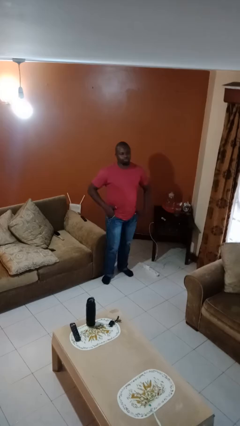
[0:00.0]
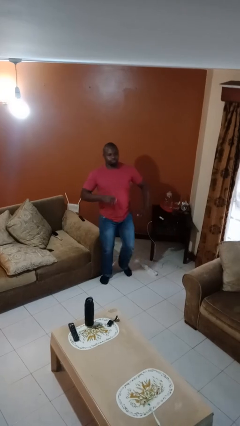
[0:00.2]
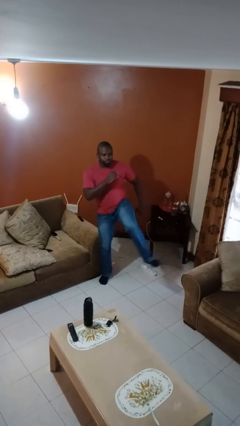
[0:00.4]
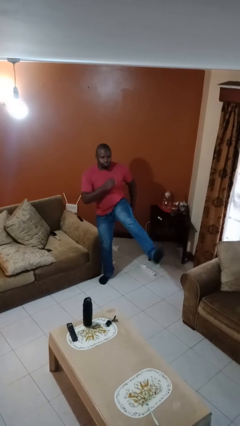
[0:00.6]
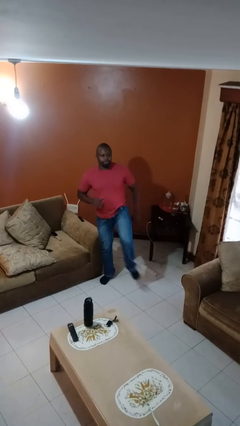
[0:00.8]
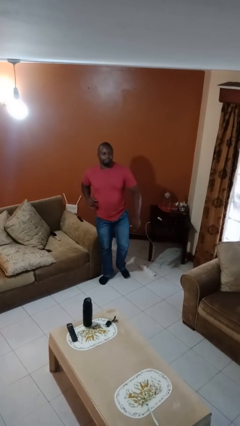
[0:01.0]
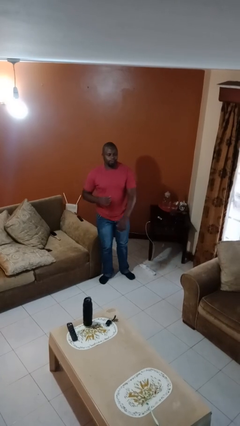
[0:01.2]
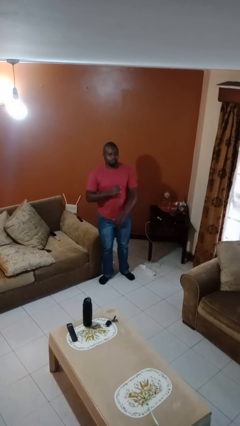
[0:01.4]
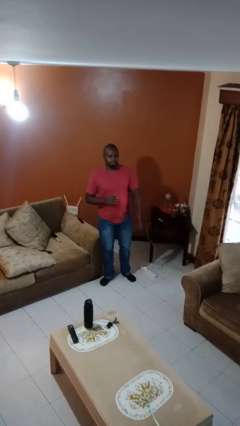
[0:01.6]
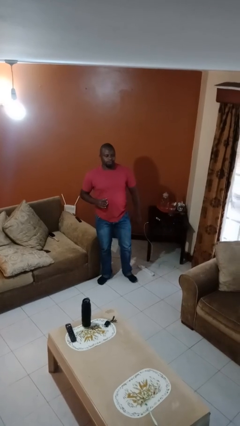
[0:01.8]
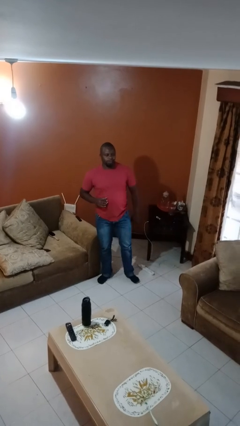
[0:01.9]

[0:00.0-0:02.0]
person karate kicks

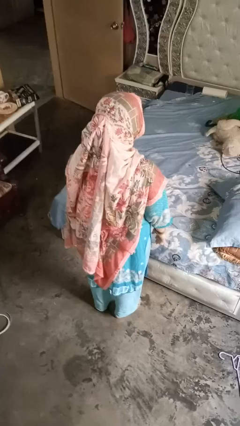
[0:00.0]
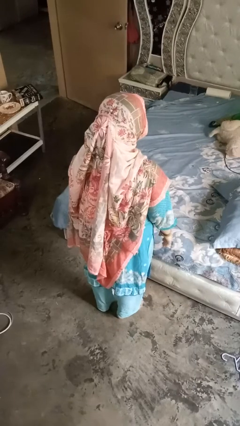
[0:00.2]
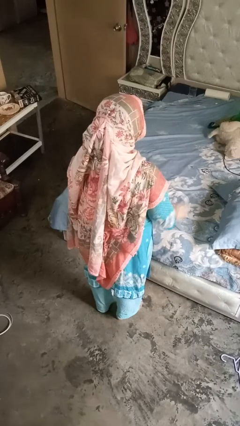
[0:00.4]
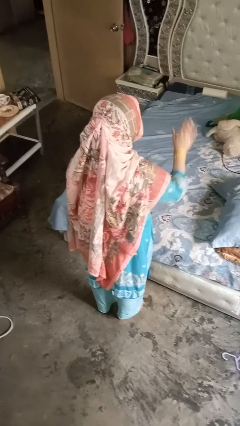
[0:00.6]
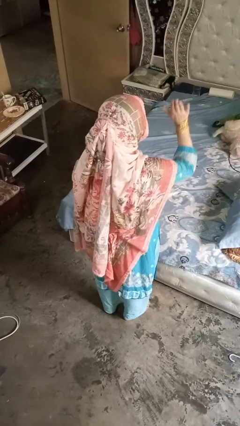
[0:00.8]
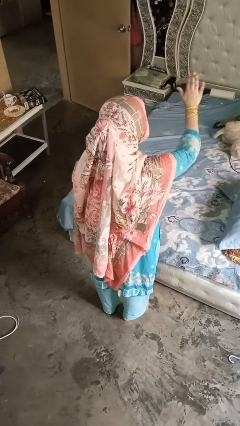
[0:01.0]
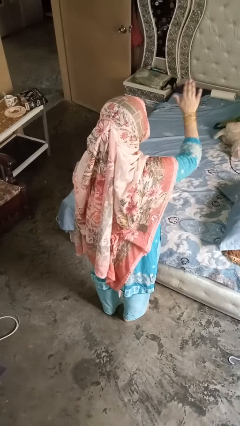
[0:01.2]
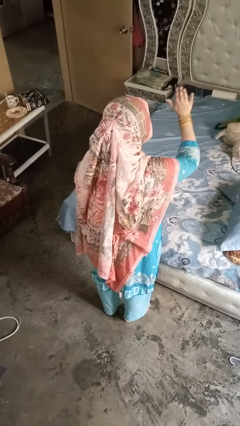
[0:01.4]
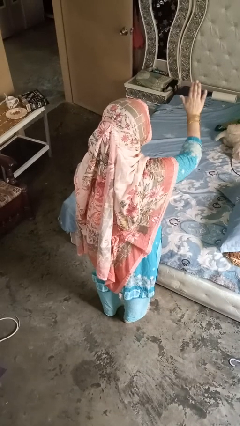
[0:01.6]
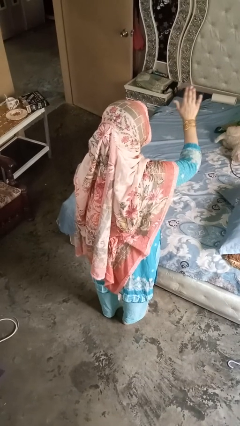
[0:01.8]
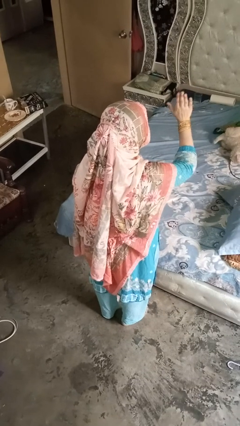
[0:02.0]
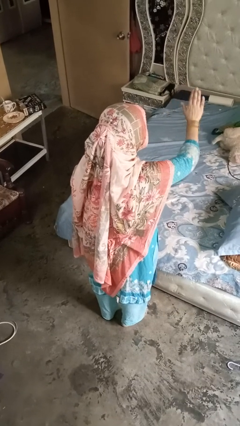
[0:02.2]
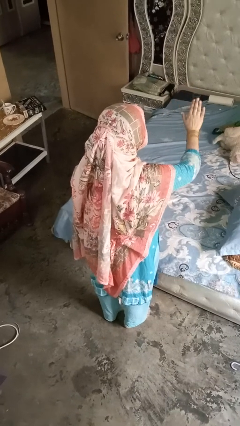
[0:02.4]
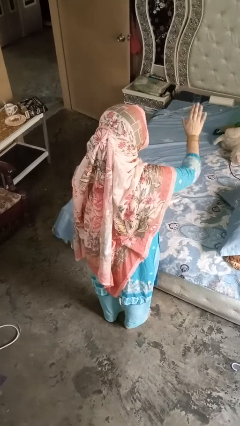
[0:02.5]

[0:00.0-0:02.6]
person gestures stop

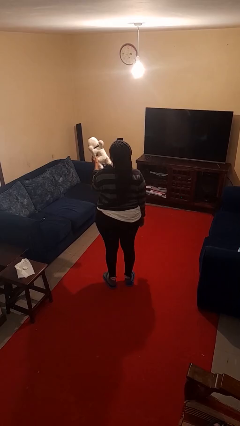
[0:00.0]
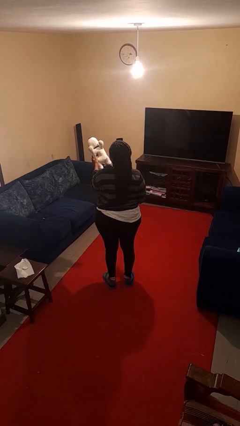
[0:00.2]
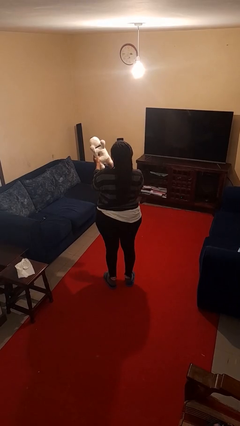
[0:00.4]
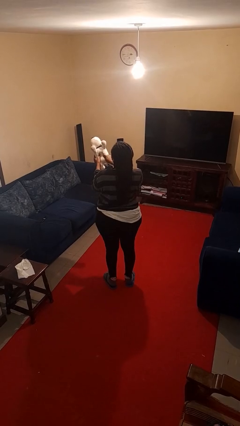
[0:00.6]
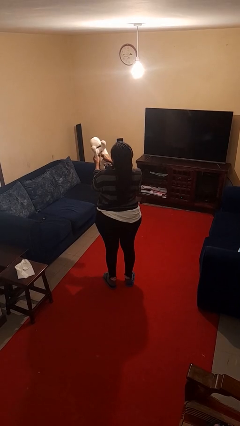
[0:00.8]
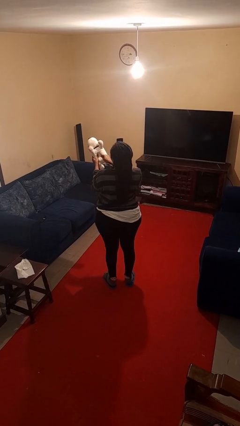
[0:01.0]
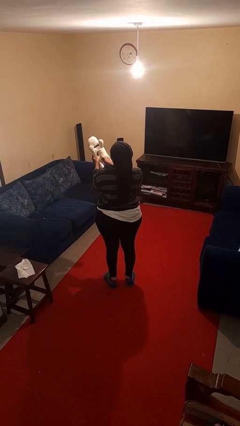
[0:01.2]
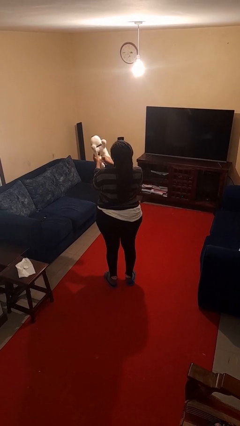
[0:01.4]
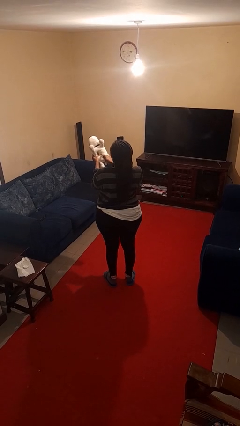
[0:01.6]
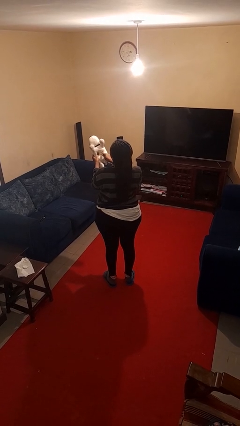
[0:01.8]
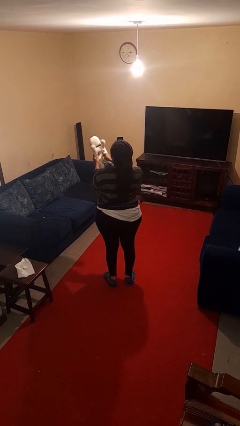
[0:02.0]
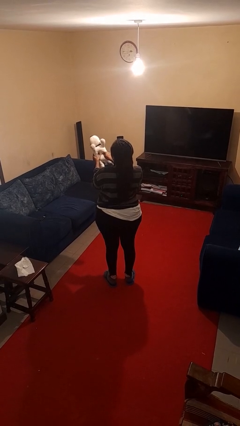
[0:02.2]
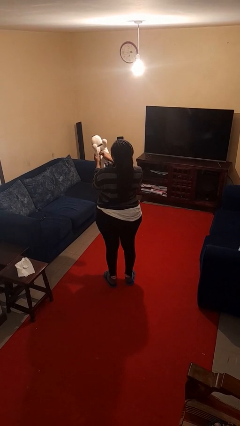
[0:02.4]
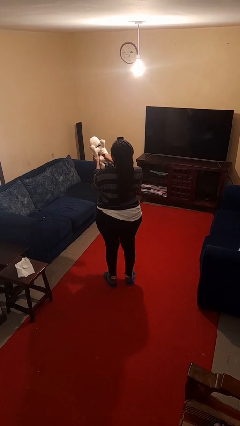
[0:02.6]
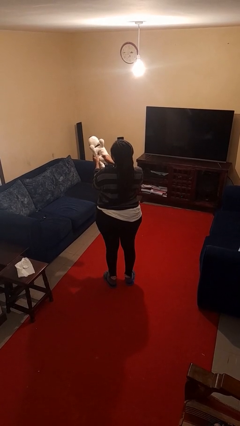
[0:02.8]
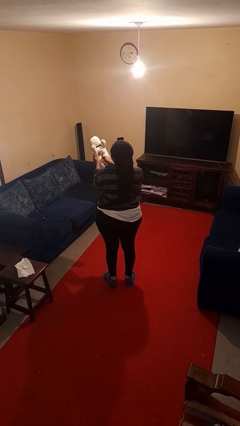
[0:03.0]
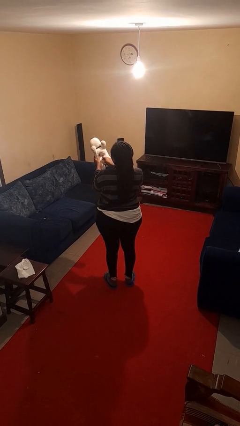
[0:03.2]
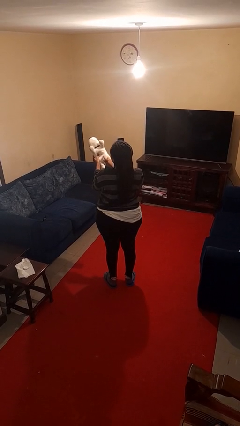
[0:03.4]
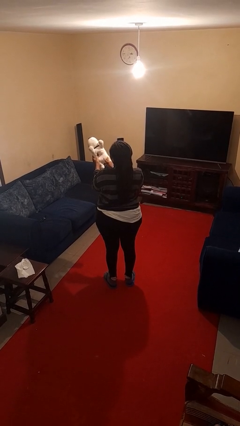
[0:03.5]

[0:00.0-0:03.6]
person taps object with finger

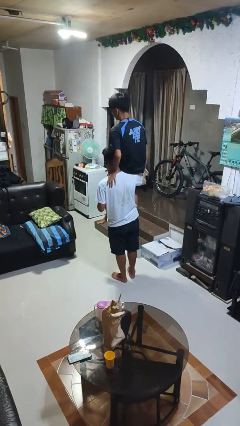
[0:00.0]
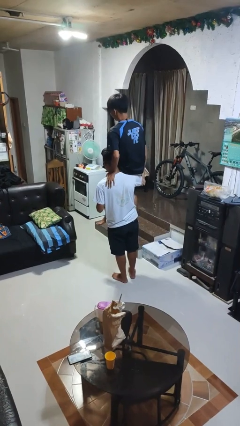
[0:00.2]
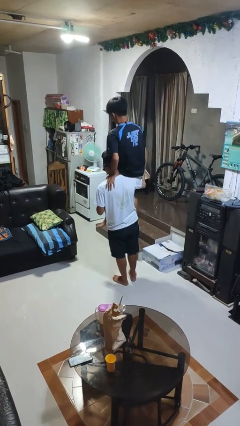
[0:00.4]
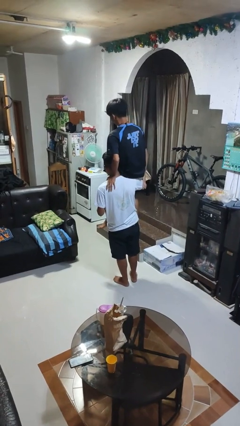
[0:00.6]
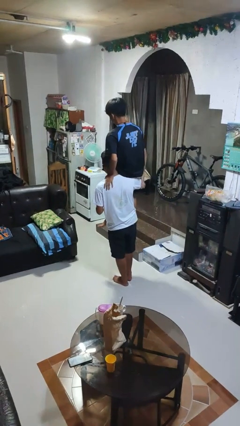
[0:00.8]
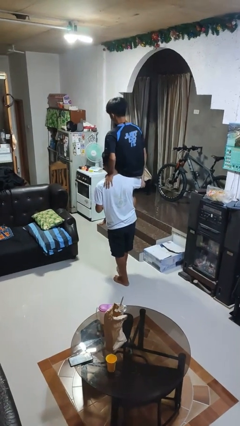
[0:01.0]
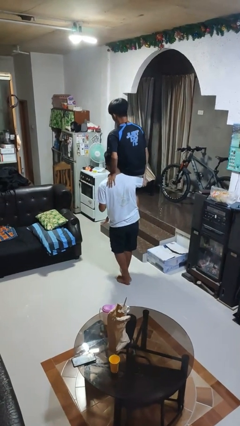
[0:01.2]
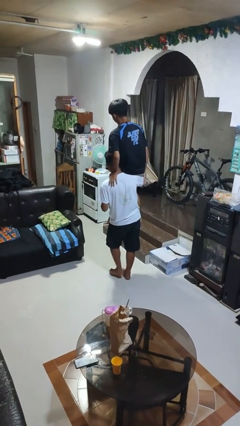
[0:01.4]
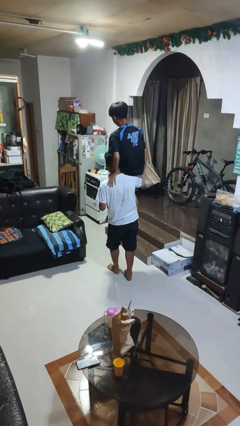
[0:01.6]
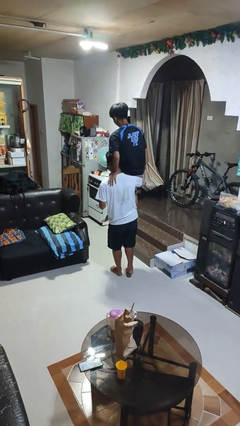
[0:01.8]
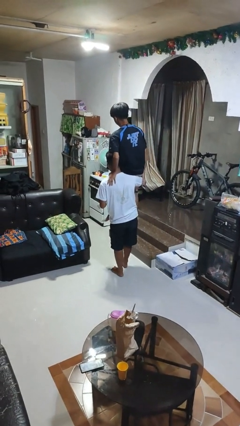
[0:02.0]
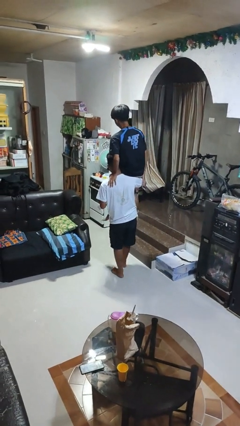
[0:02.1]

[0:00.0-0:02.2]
person carries person on shoulders

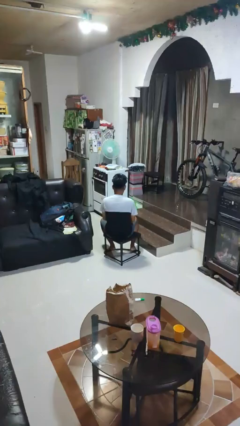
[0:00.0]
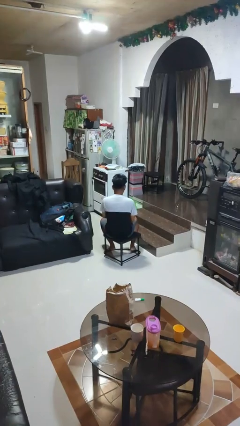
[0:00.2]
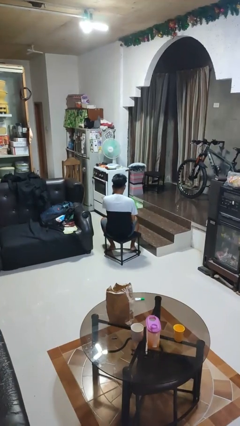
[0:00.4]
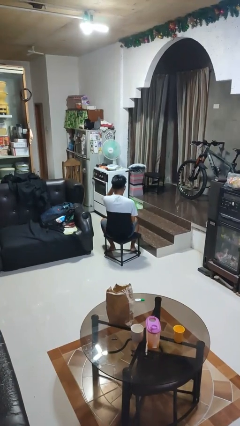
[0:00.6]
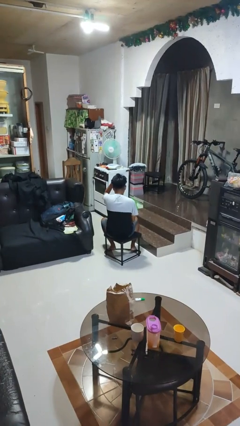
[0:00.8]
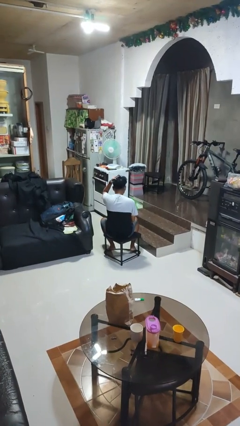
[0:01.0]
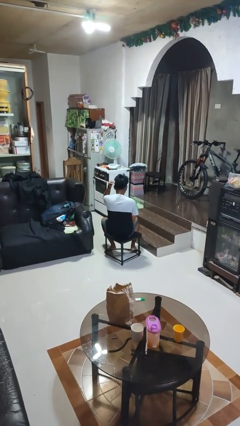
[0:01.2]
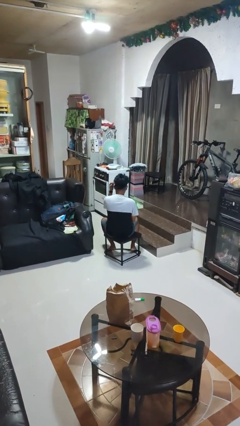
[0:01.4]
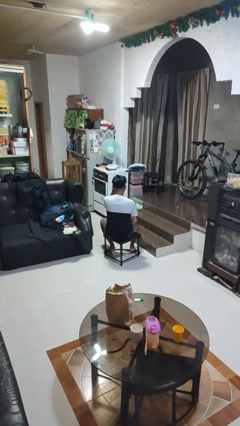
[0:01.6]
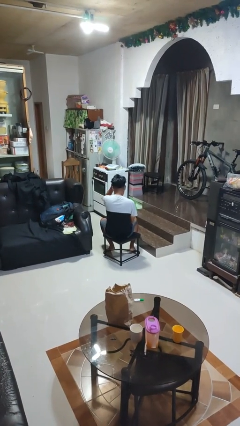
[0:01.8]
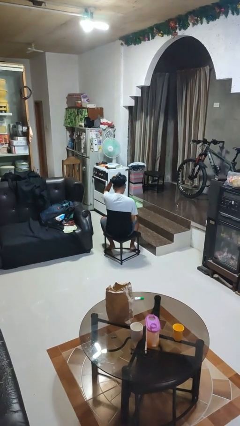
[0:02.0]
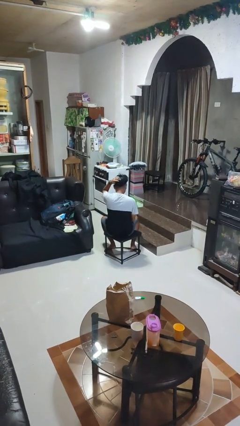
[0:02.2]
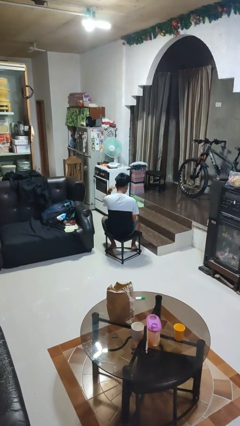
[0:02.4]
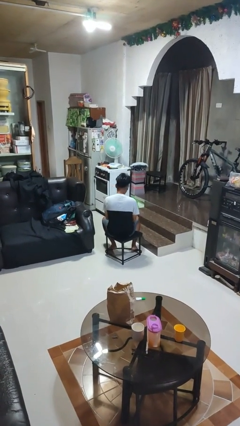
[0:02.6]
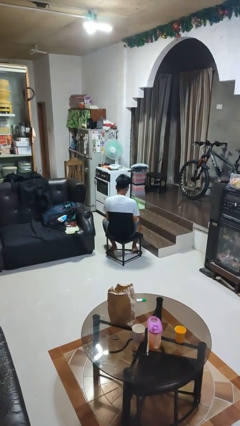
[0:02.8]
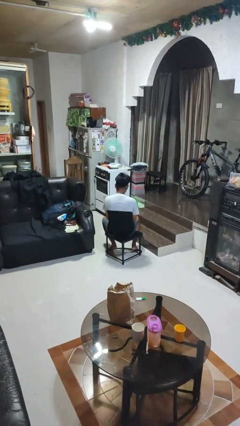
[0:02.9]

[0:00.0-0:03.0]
person strokes hair

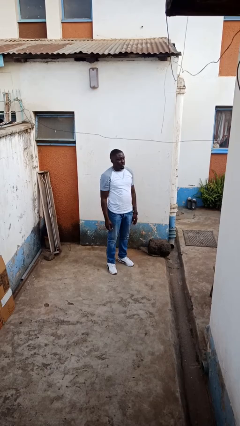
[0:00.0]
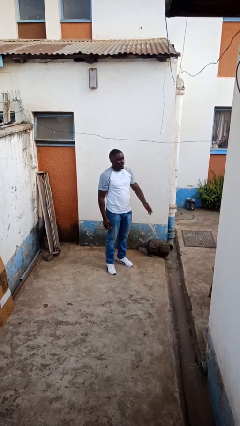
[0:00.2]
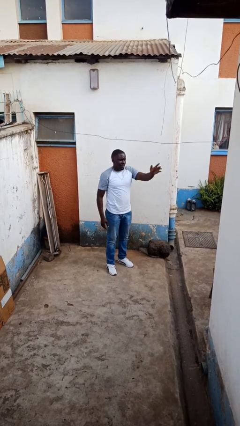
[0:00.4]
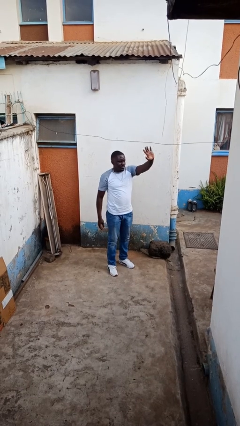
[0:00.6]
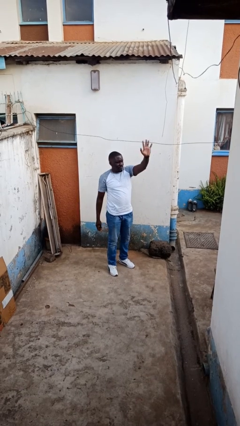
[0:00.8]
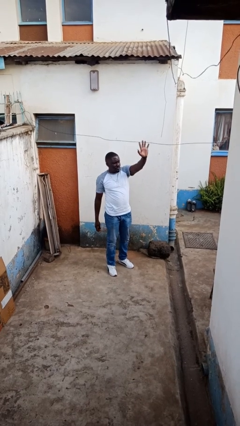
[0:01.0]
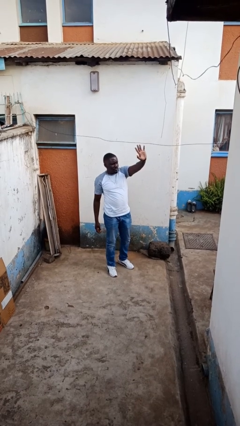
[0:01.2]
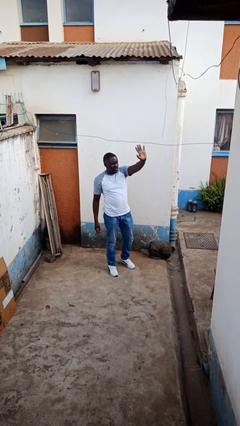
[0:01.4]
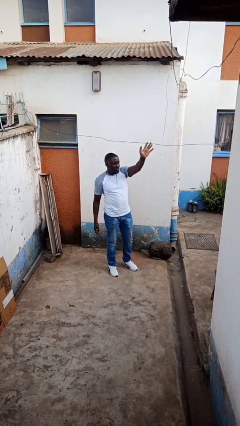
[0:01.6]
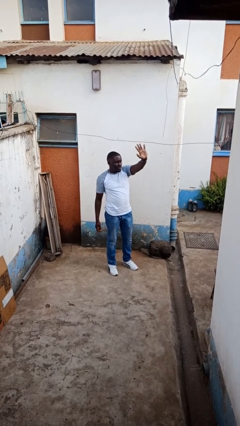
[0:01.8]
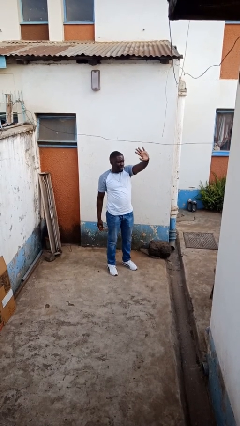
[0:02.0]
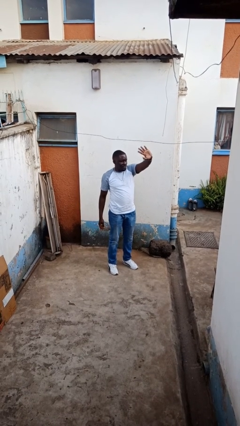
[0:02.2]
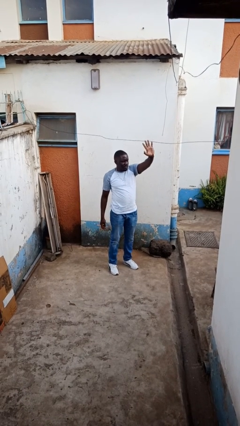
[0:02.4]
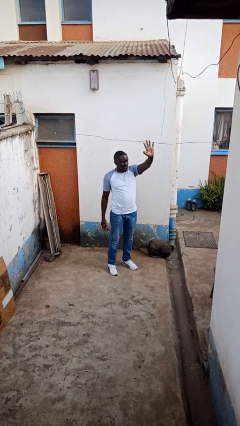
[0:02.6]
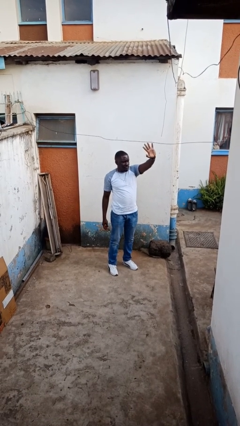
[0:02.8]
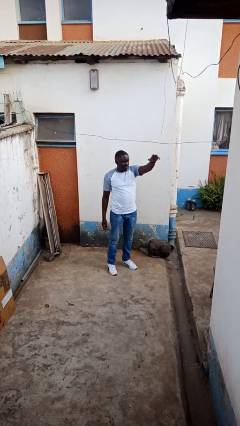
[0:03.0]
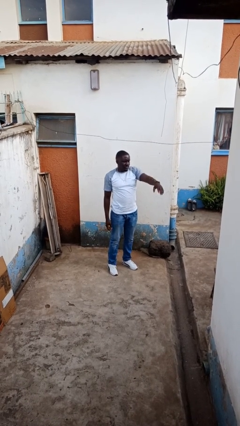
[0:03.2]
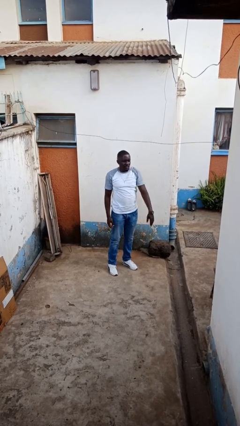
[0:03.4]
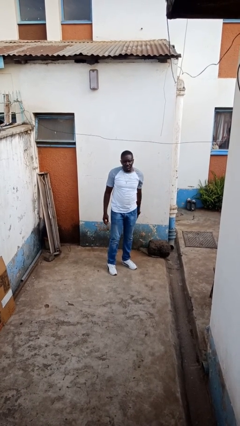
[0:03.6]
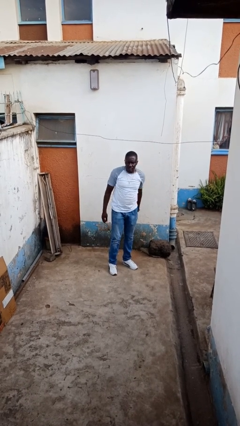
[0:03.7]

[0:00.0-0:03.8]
person waves at person

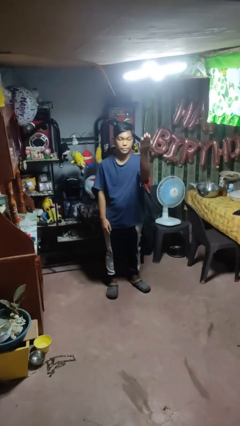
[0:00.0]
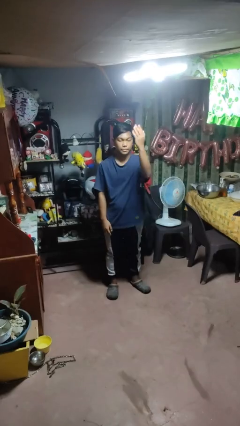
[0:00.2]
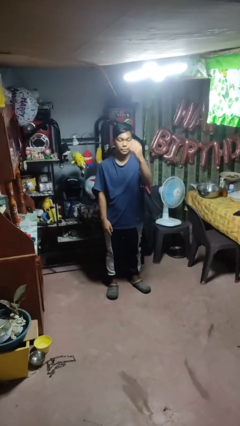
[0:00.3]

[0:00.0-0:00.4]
person gestures swipe up
